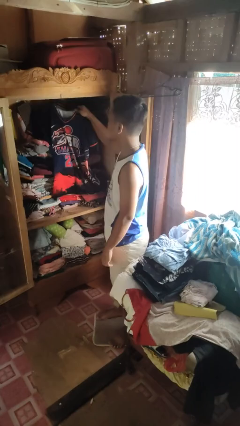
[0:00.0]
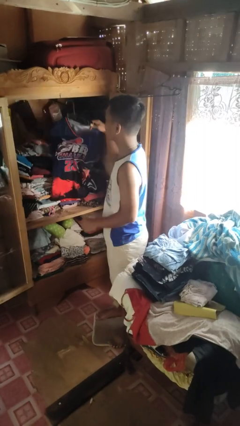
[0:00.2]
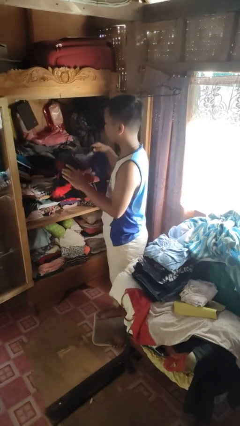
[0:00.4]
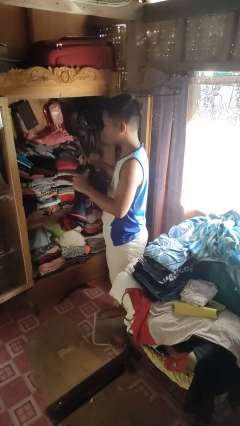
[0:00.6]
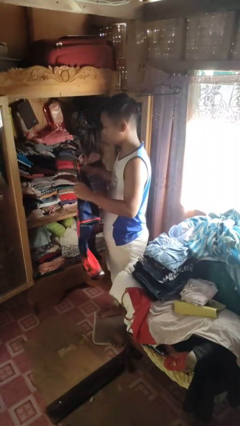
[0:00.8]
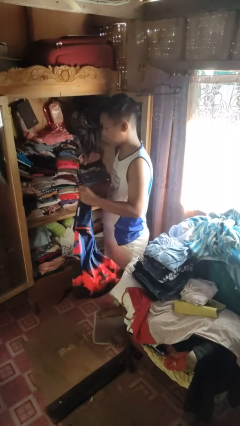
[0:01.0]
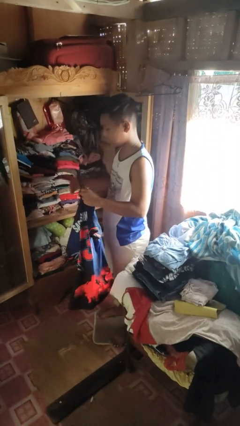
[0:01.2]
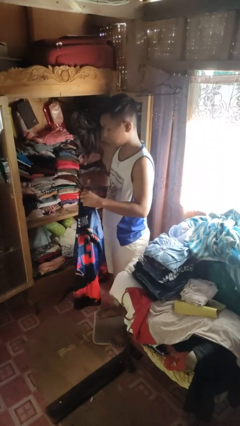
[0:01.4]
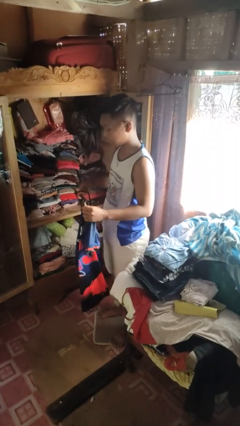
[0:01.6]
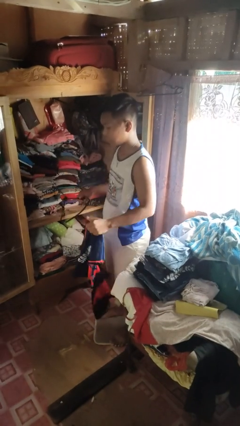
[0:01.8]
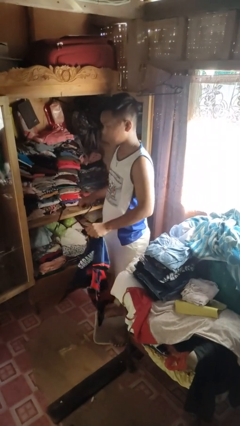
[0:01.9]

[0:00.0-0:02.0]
person takes clothes from closet

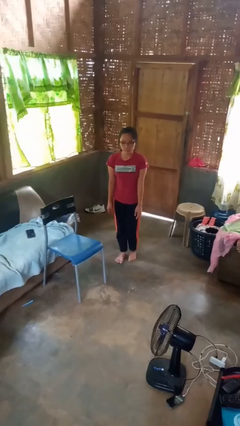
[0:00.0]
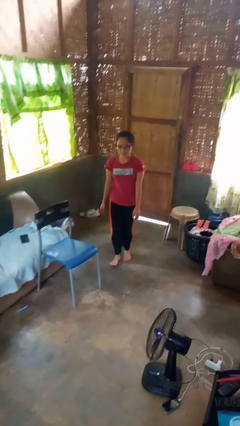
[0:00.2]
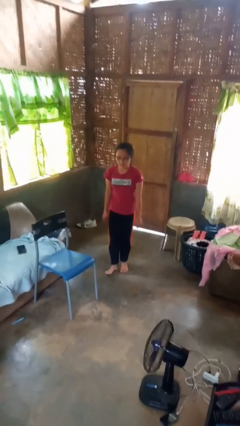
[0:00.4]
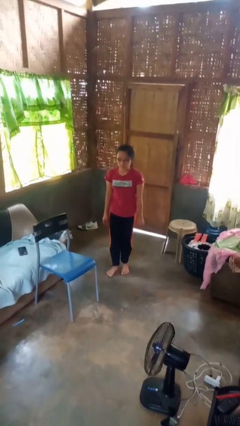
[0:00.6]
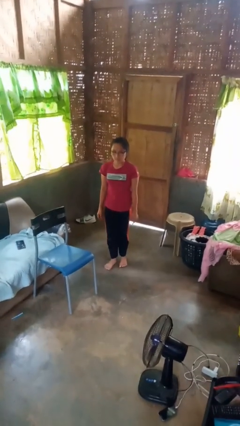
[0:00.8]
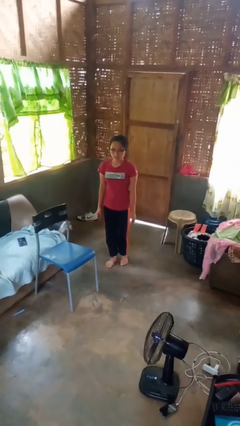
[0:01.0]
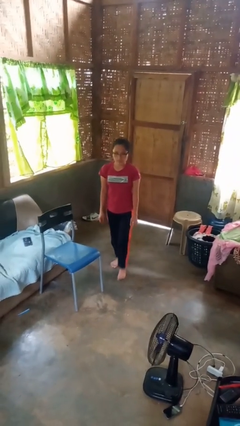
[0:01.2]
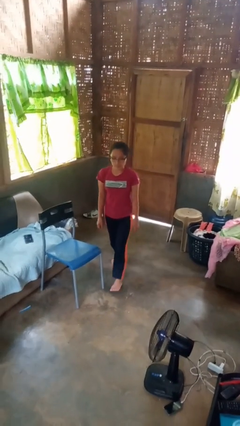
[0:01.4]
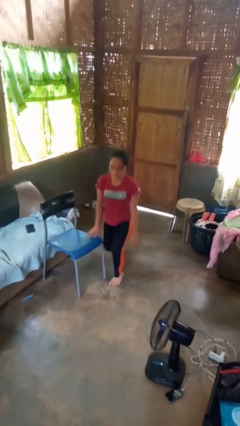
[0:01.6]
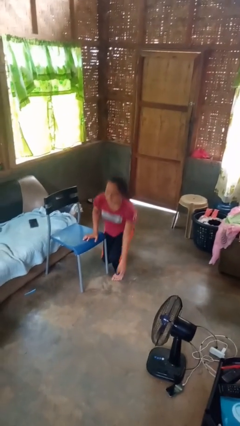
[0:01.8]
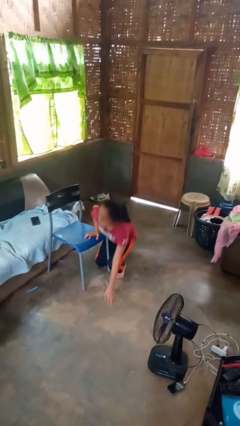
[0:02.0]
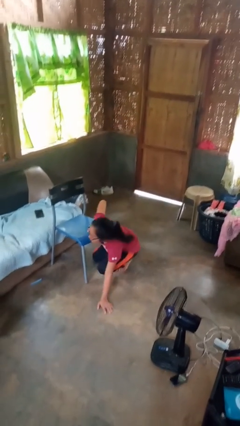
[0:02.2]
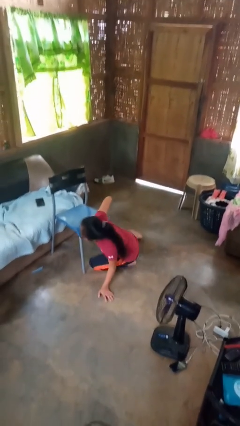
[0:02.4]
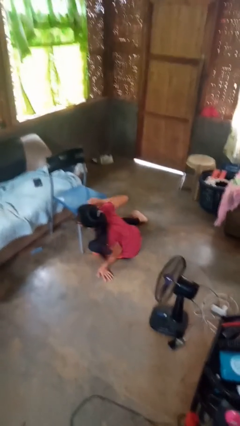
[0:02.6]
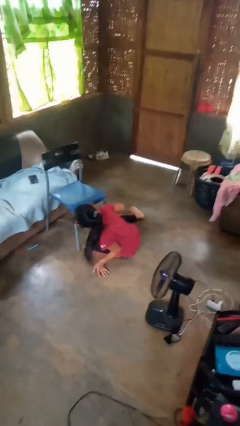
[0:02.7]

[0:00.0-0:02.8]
person trips on object on floor

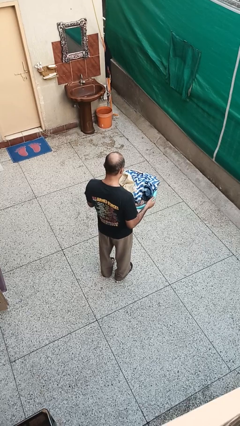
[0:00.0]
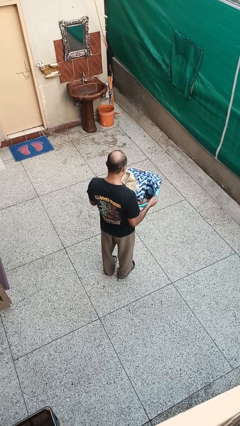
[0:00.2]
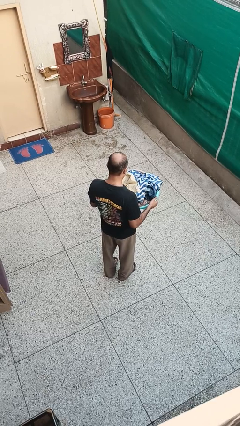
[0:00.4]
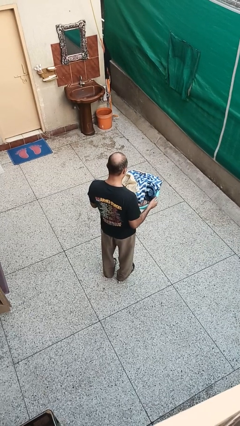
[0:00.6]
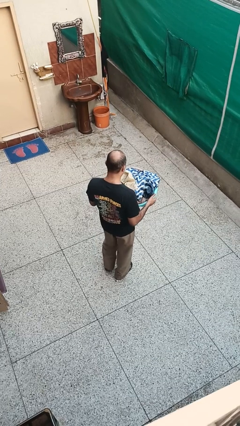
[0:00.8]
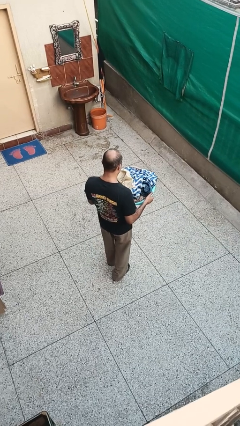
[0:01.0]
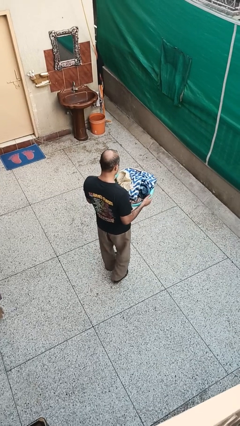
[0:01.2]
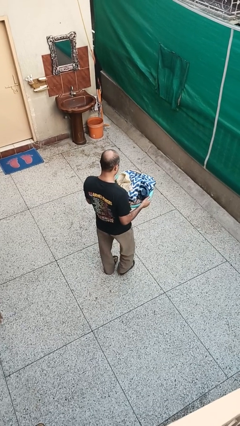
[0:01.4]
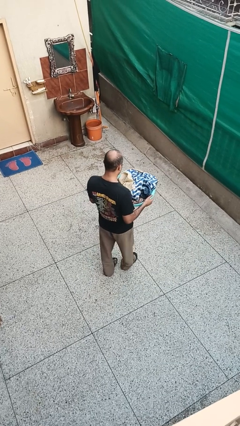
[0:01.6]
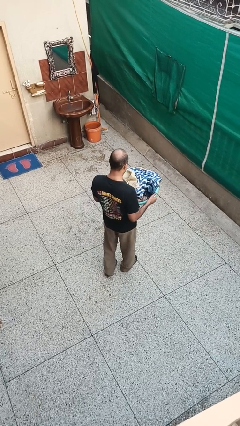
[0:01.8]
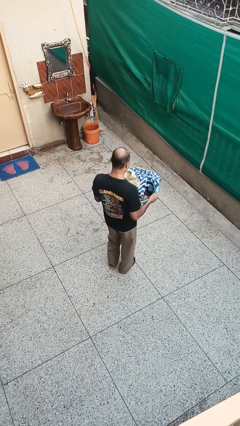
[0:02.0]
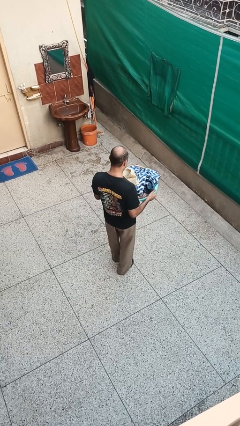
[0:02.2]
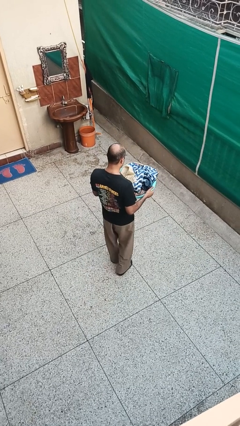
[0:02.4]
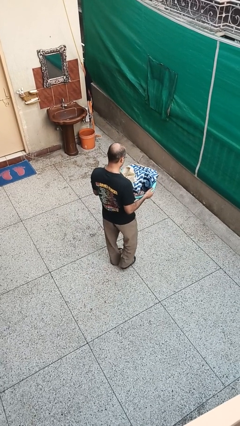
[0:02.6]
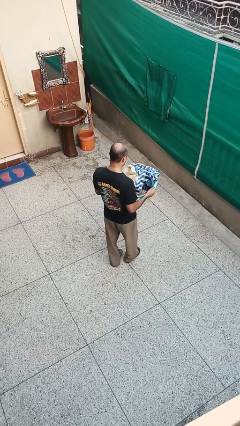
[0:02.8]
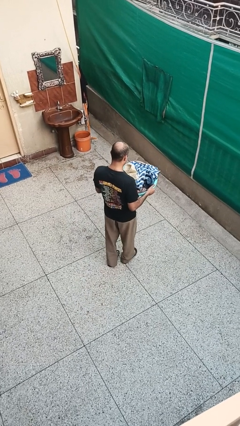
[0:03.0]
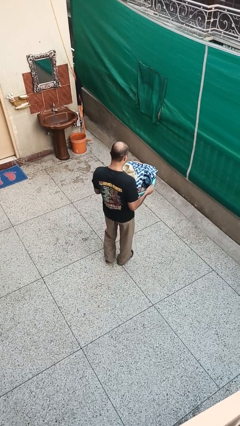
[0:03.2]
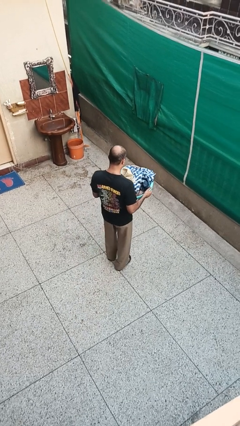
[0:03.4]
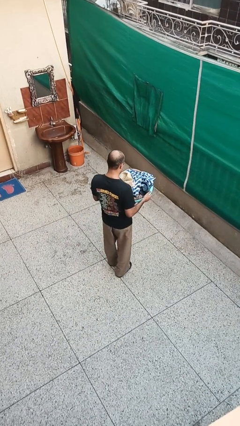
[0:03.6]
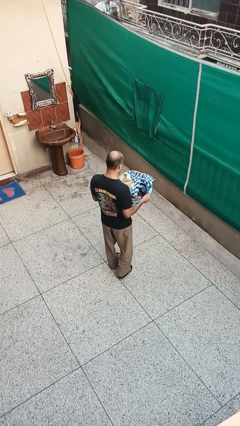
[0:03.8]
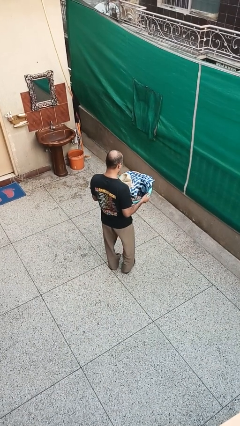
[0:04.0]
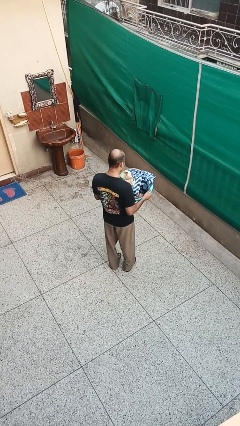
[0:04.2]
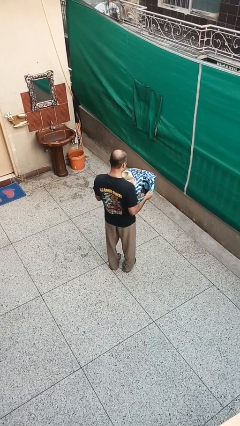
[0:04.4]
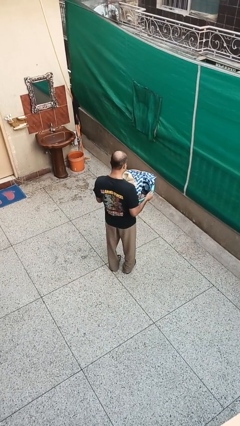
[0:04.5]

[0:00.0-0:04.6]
person carries laundry basket

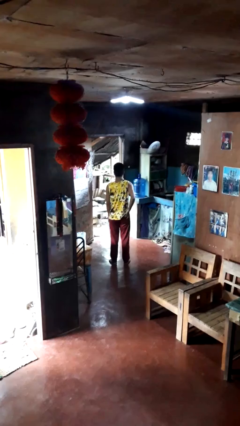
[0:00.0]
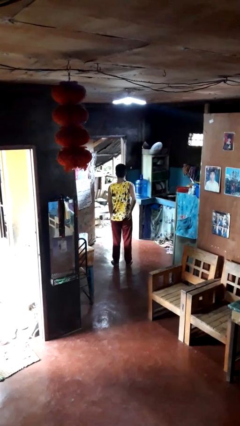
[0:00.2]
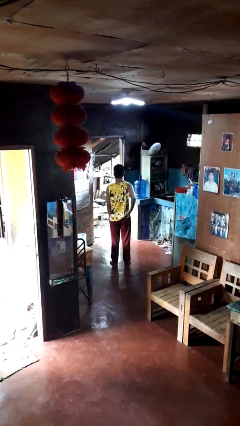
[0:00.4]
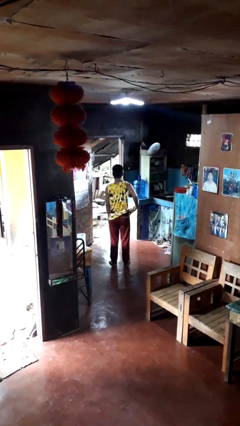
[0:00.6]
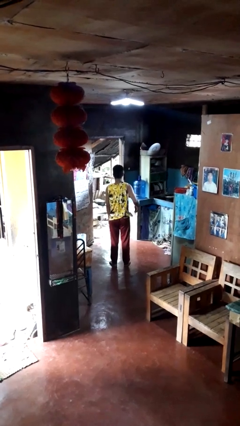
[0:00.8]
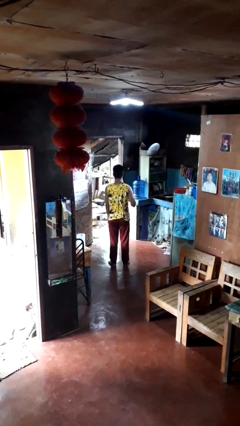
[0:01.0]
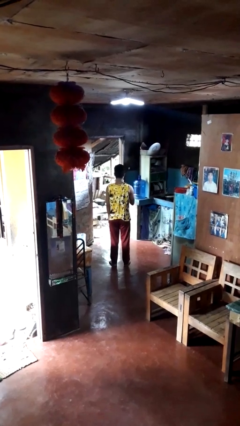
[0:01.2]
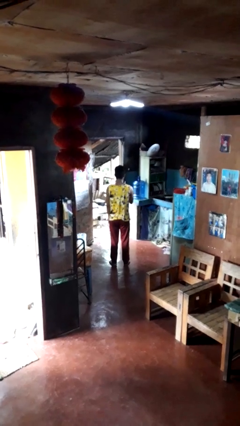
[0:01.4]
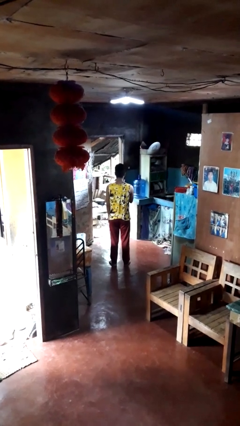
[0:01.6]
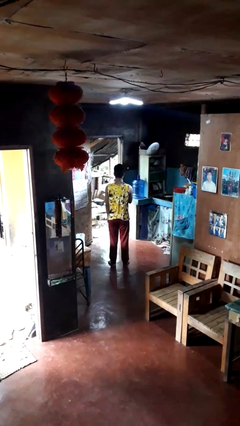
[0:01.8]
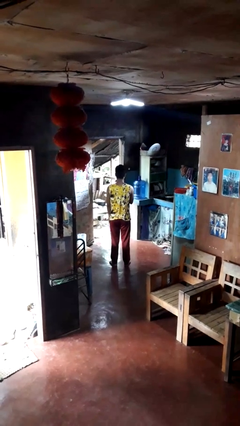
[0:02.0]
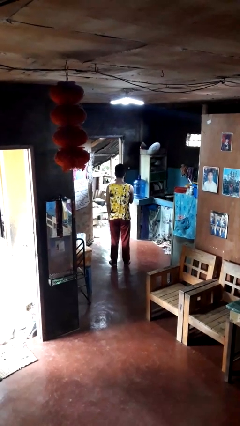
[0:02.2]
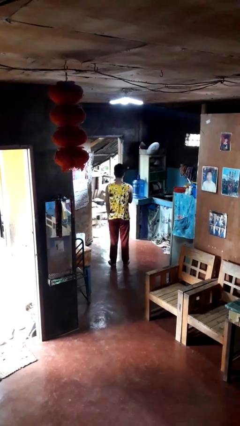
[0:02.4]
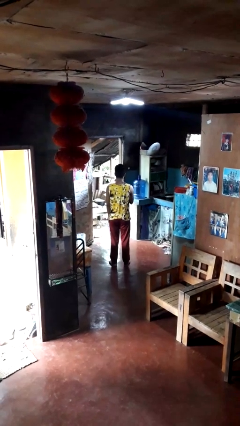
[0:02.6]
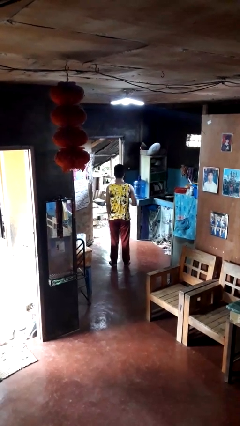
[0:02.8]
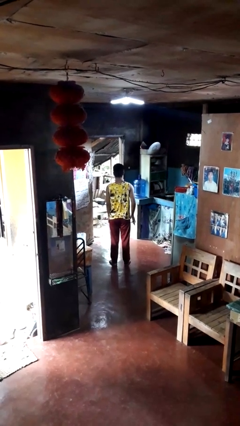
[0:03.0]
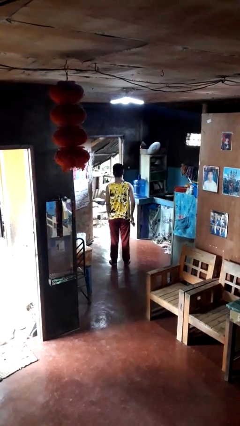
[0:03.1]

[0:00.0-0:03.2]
person takes phone from pocket

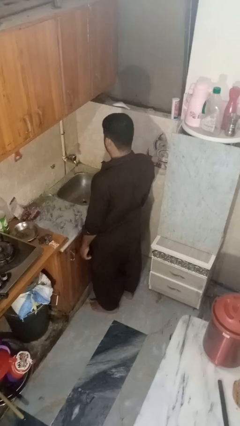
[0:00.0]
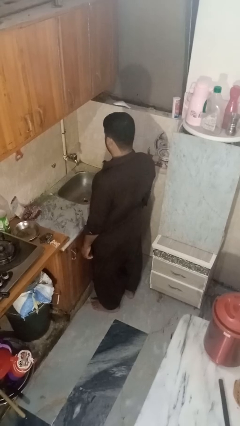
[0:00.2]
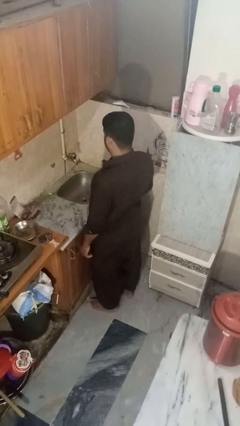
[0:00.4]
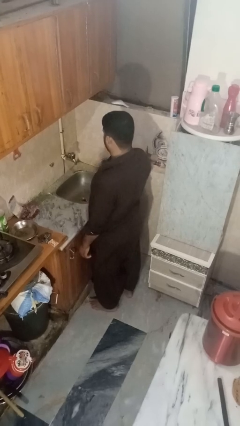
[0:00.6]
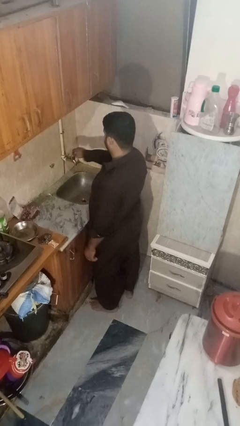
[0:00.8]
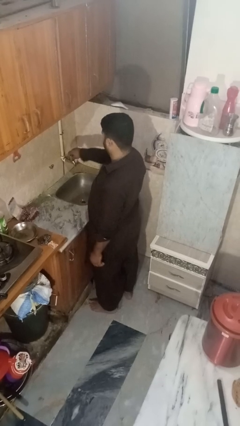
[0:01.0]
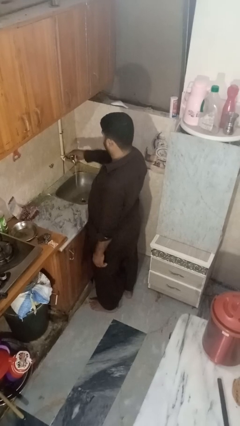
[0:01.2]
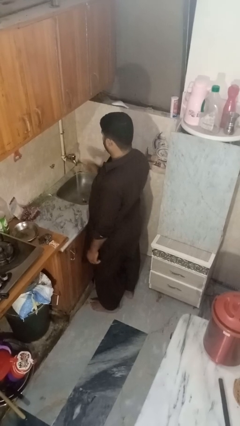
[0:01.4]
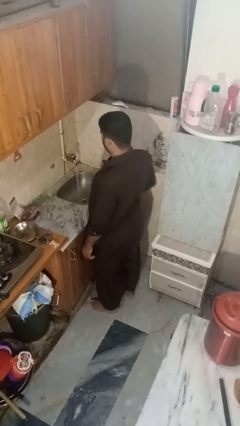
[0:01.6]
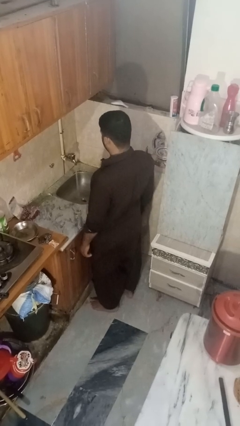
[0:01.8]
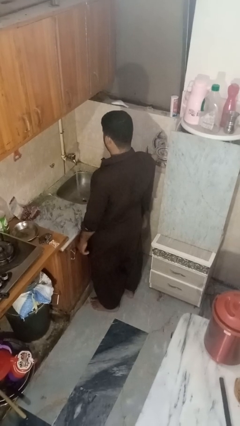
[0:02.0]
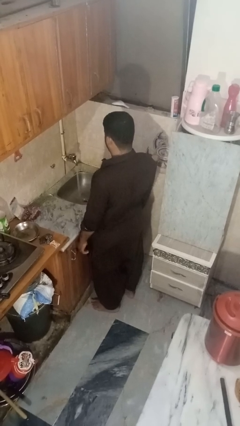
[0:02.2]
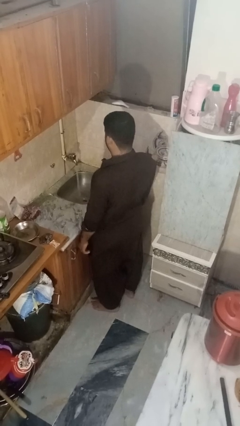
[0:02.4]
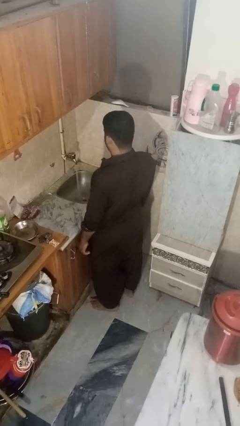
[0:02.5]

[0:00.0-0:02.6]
person turns on faucet

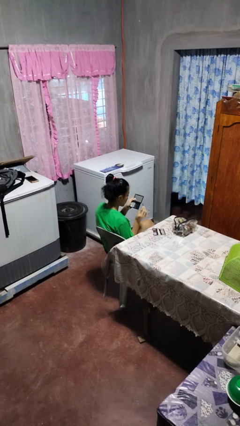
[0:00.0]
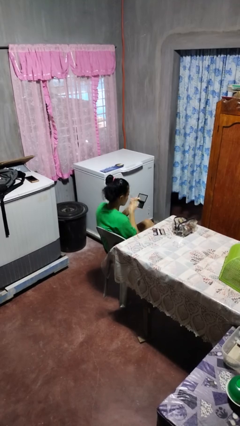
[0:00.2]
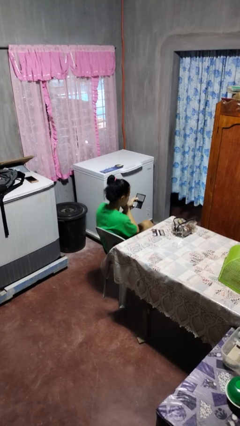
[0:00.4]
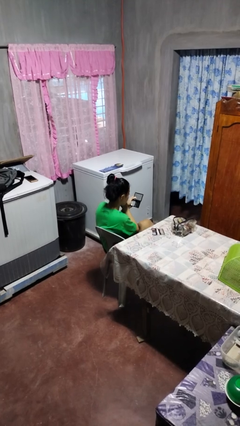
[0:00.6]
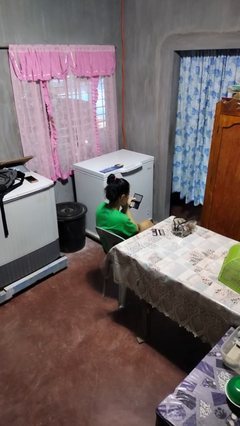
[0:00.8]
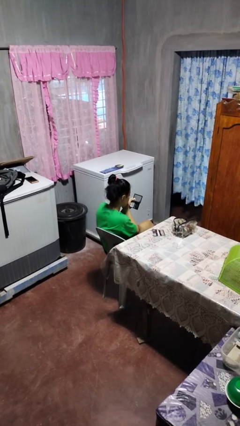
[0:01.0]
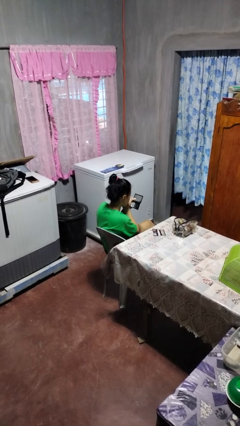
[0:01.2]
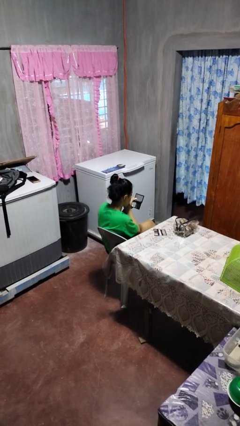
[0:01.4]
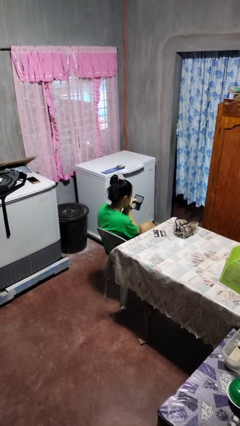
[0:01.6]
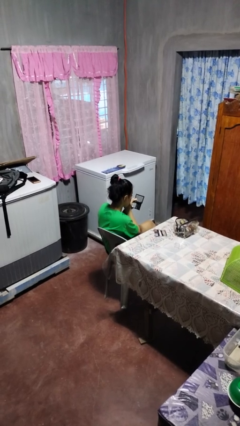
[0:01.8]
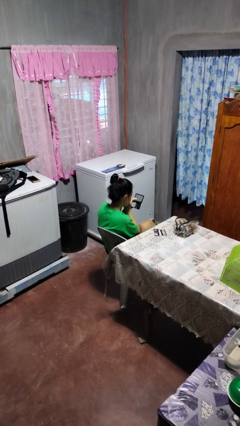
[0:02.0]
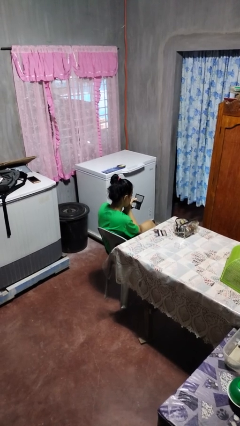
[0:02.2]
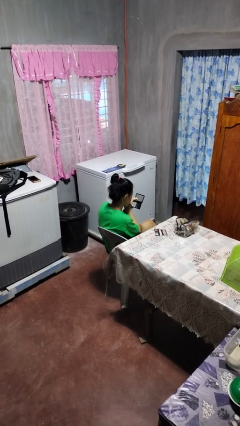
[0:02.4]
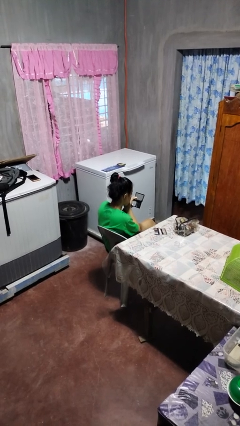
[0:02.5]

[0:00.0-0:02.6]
person applies eye makeup
